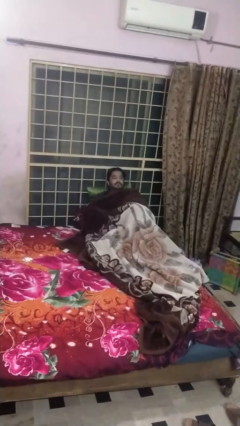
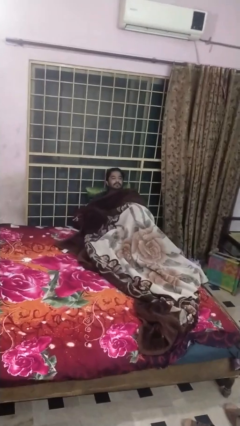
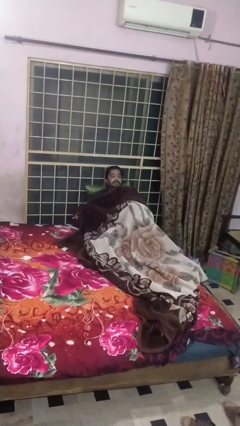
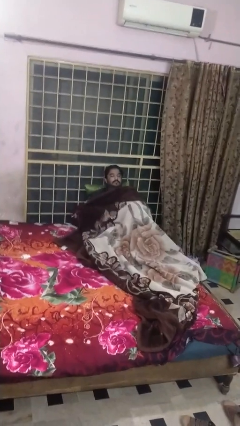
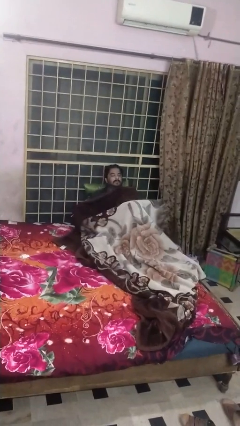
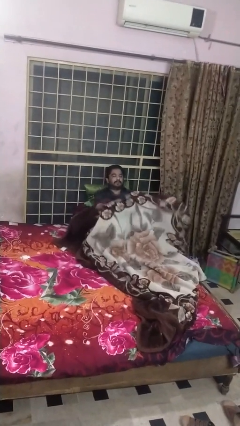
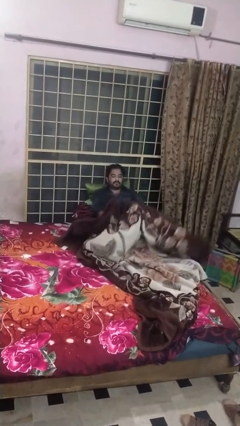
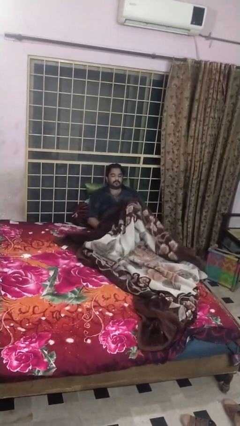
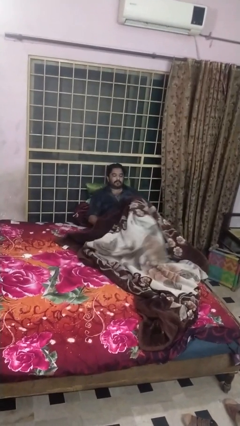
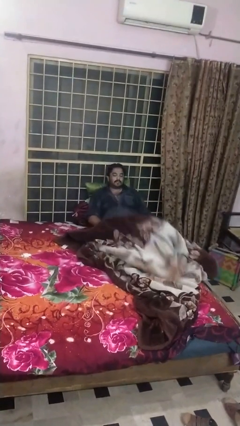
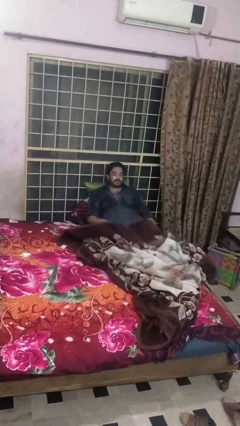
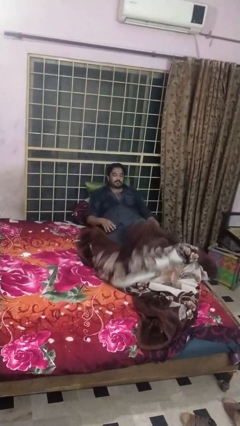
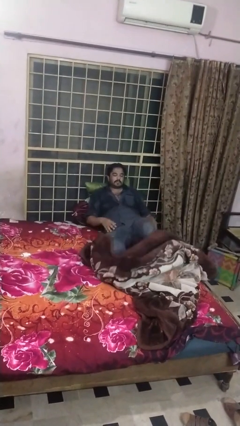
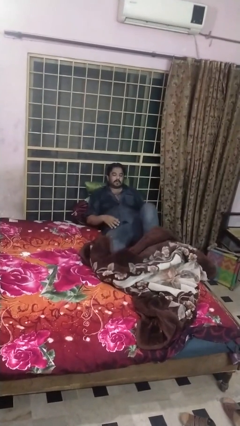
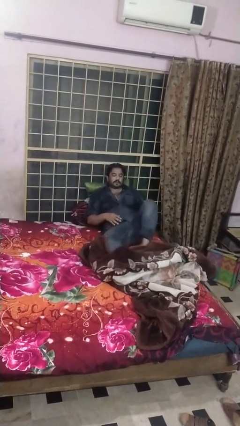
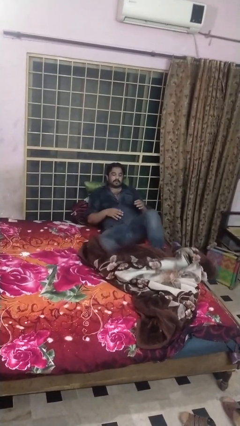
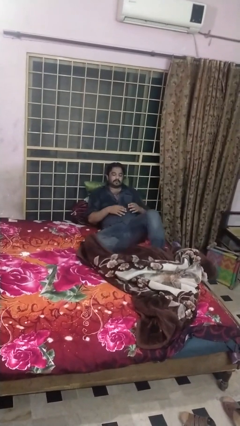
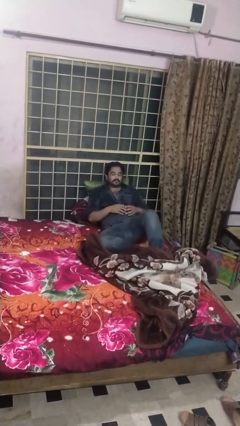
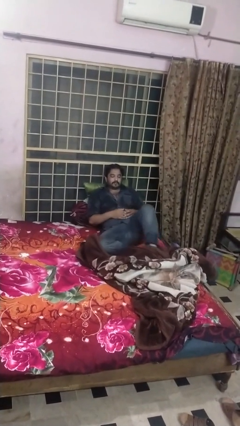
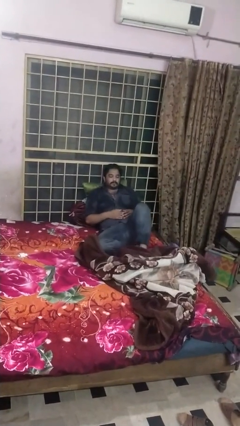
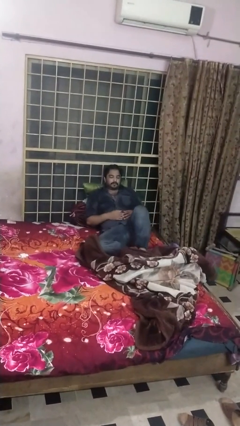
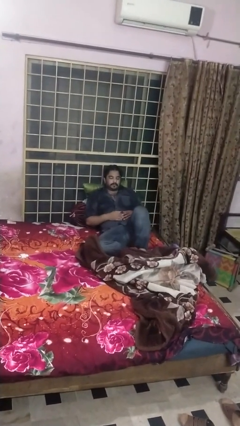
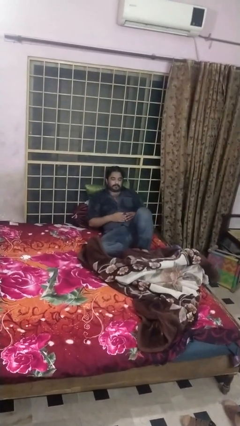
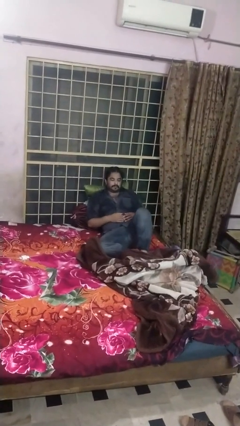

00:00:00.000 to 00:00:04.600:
person uncovers with blanket

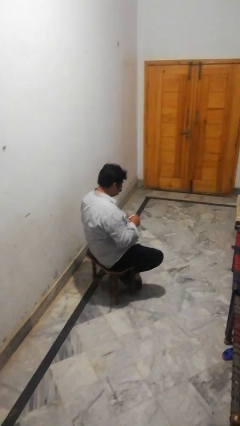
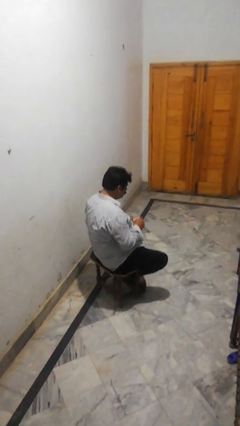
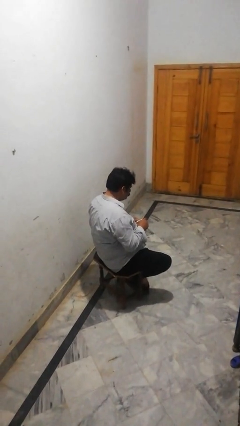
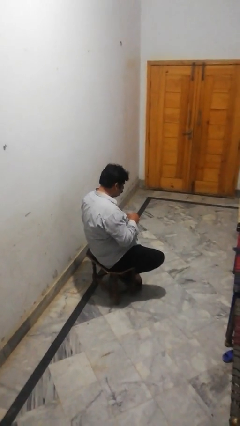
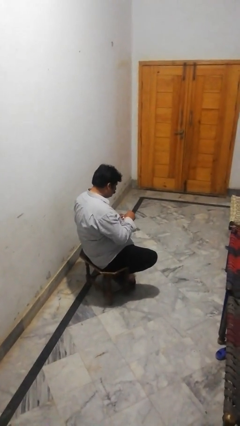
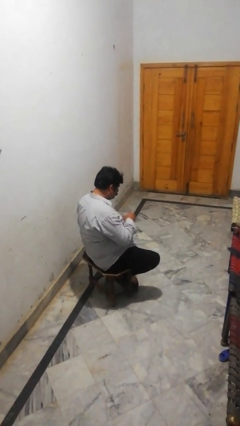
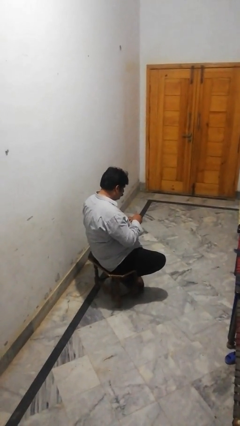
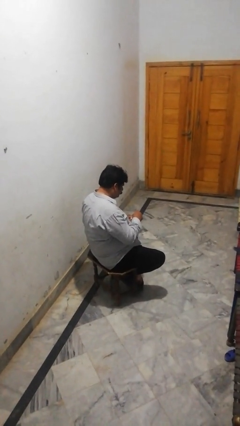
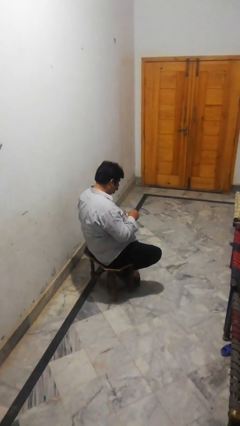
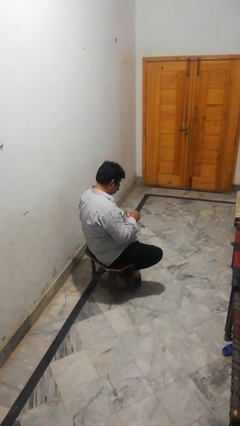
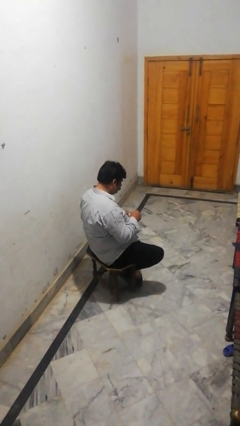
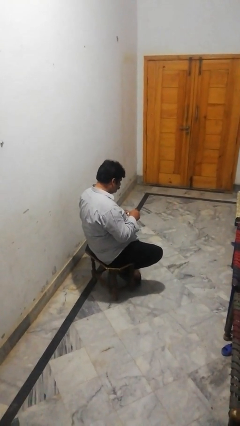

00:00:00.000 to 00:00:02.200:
person stirs mug

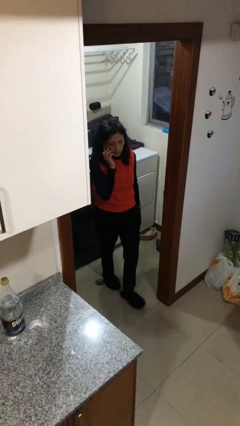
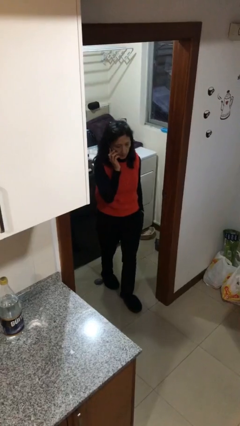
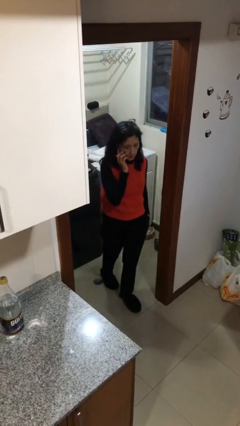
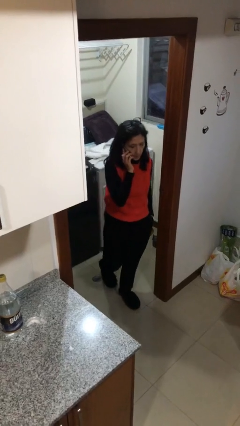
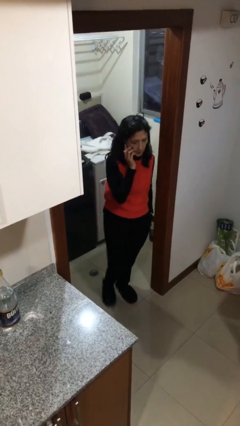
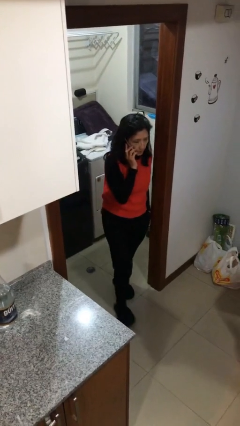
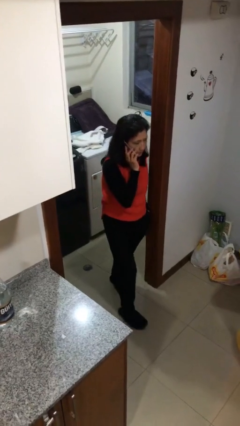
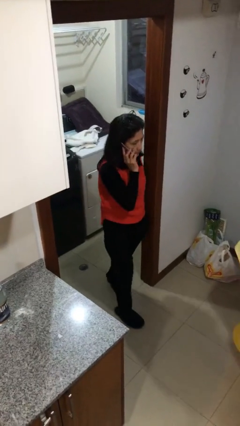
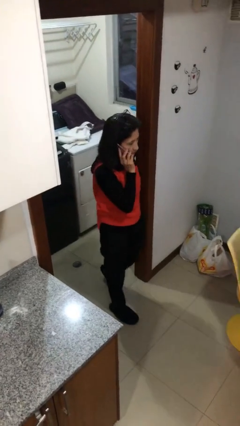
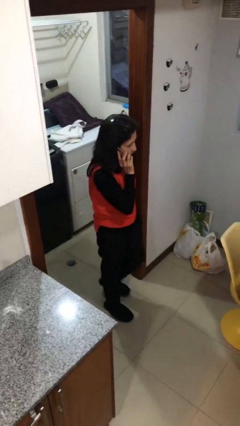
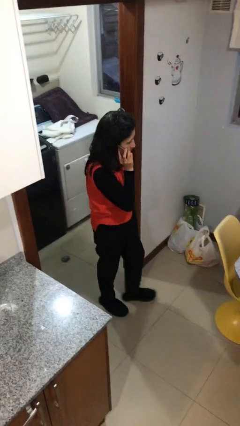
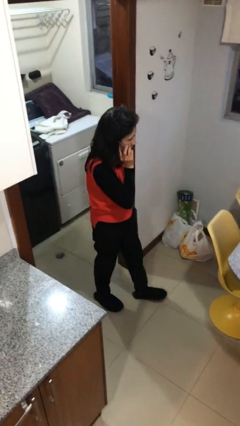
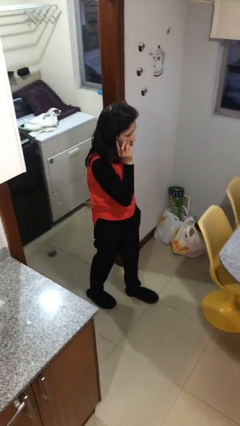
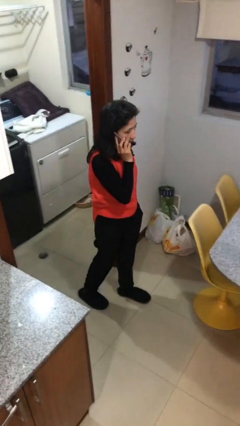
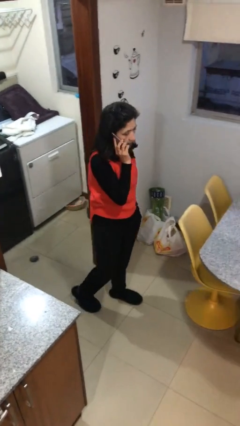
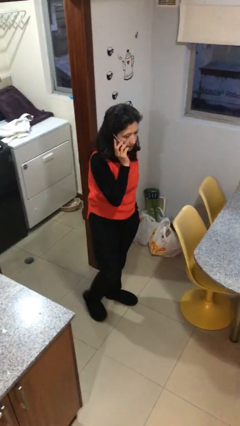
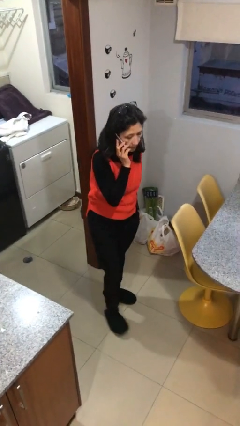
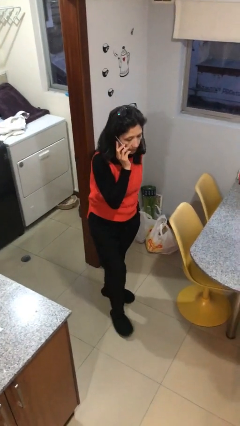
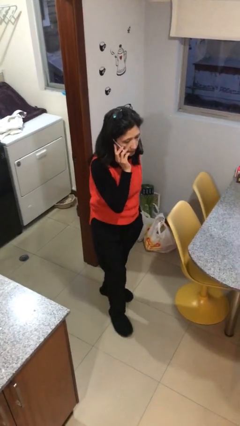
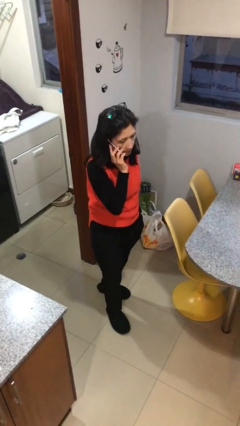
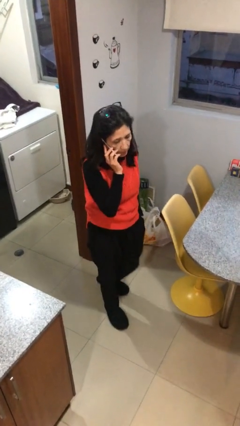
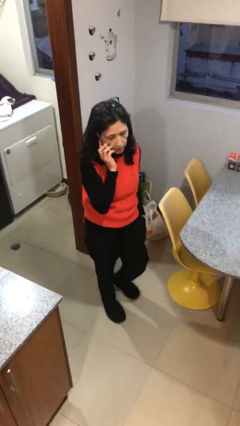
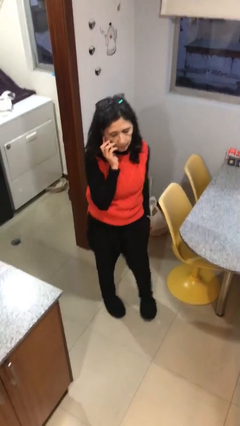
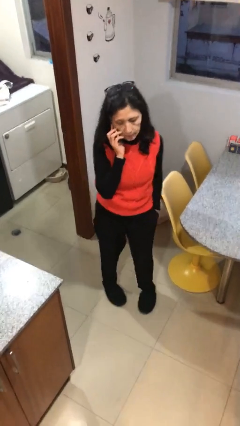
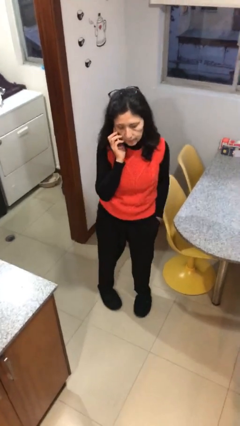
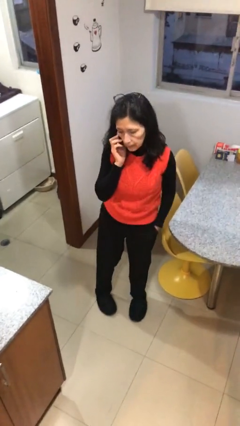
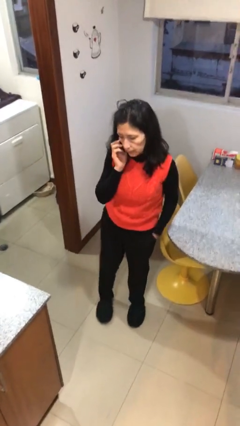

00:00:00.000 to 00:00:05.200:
person enters scene through structure

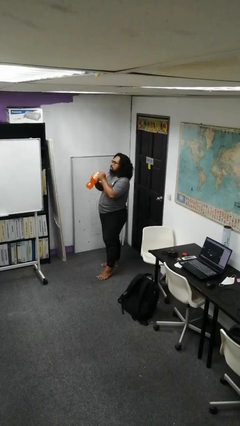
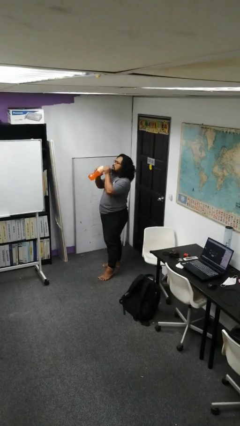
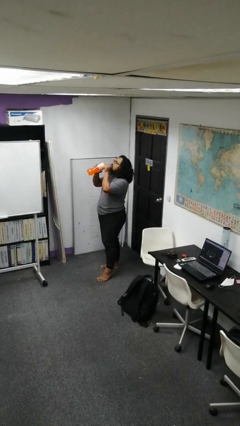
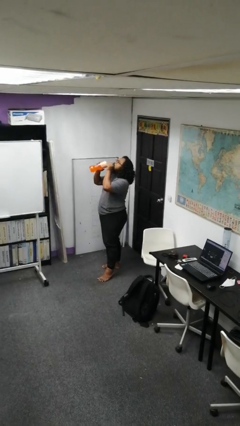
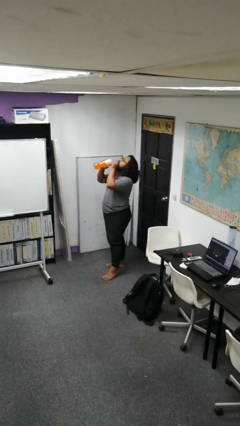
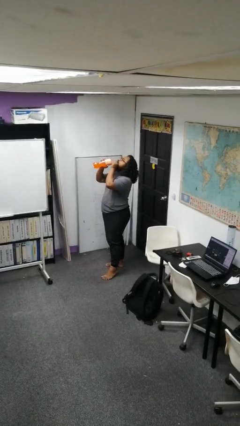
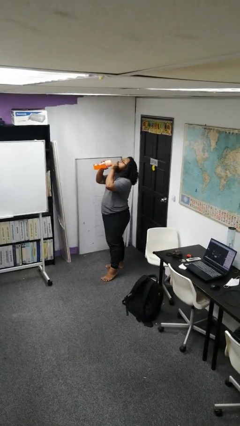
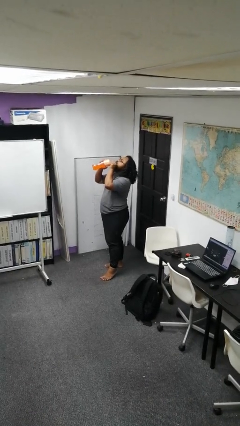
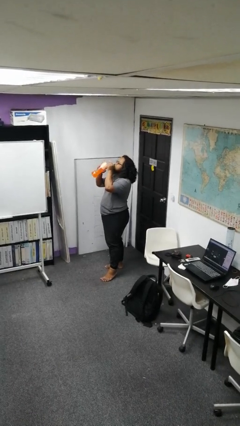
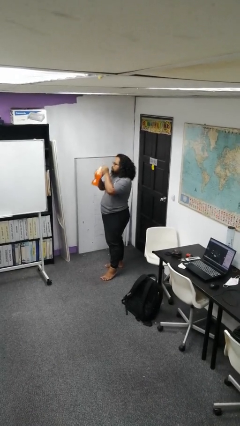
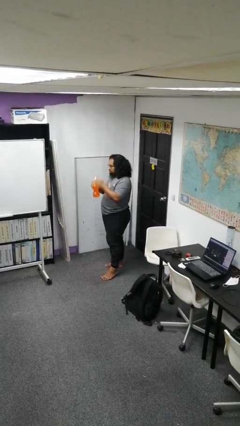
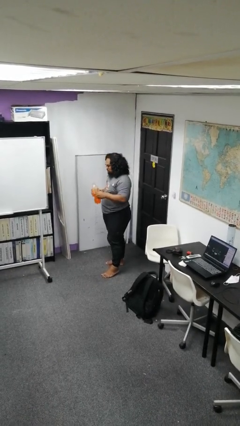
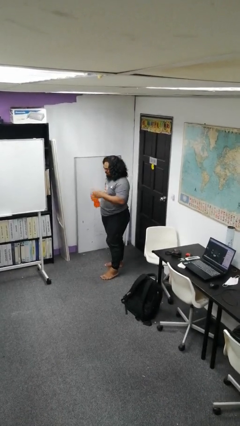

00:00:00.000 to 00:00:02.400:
person drinks from bottle

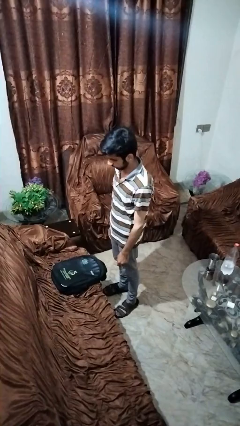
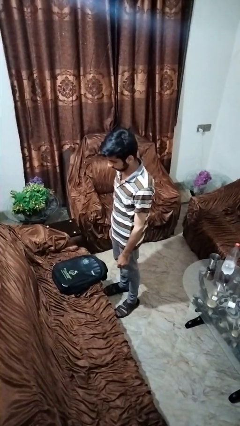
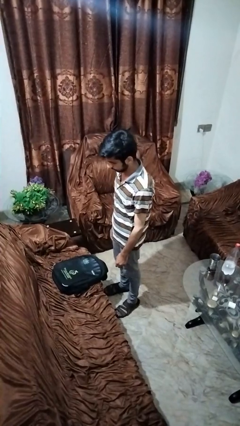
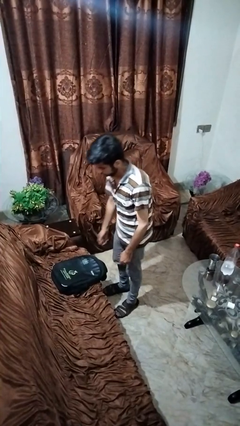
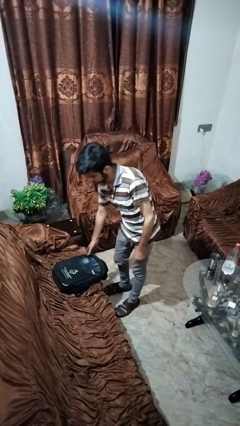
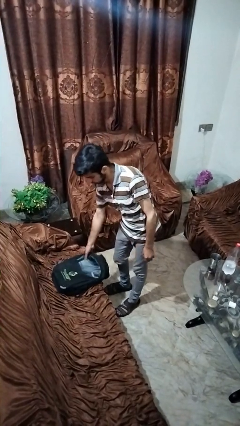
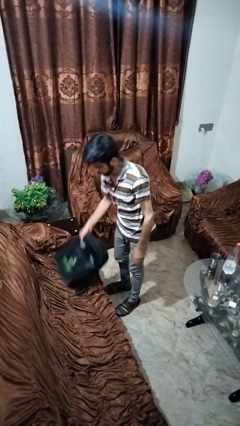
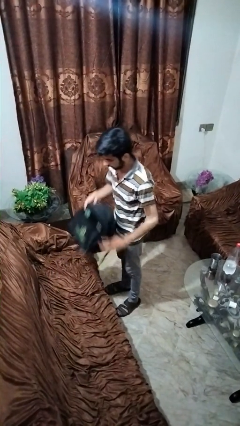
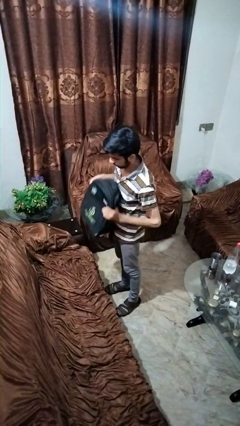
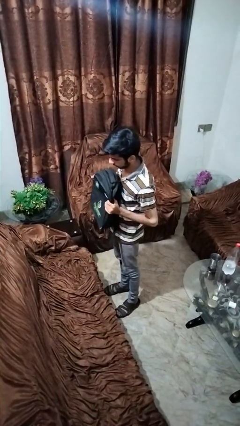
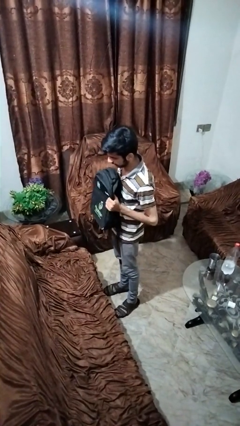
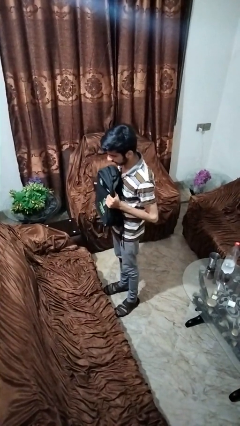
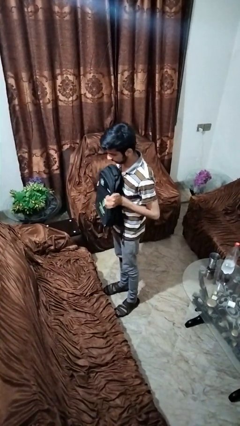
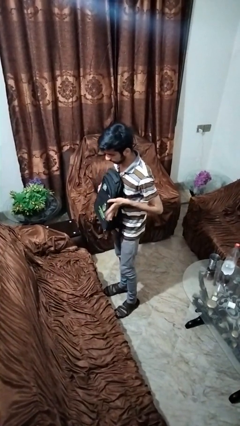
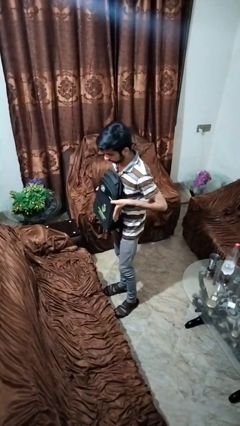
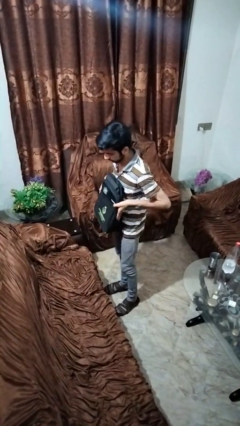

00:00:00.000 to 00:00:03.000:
person picks up object from couch

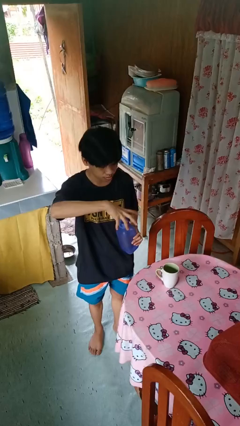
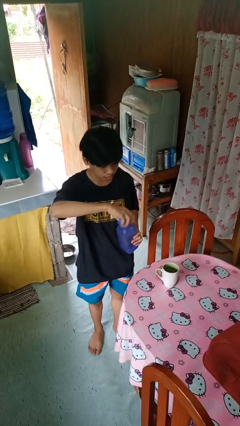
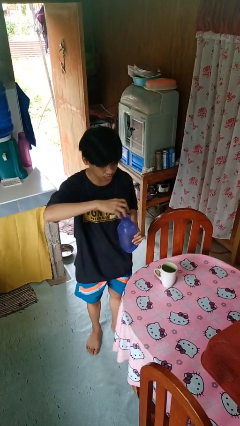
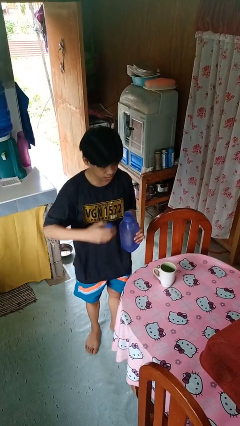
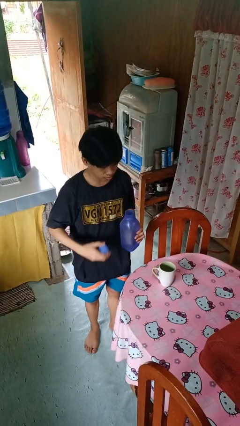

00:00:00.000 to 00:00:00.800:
person unscrews lid from bottle
